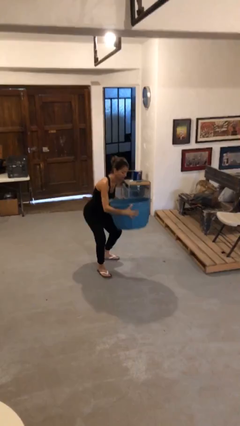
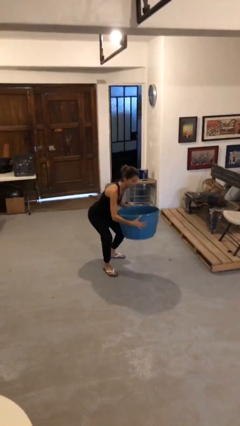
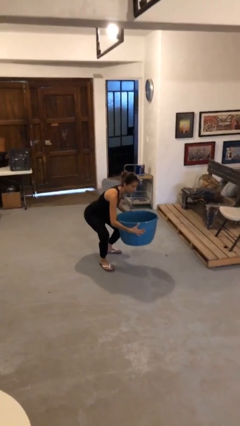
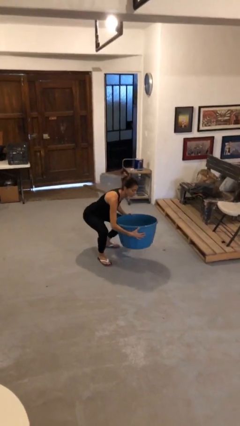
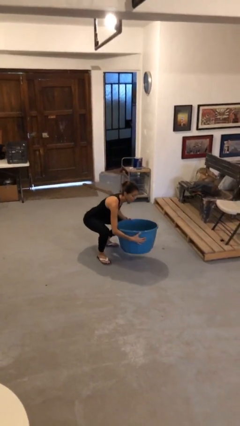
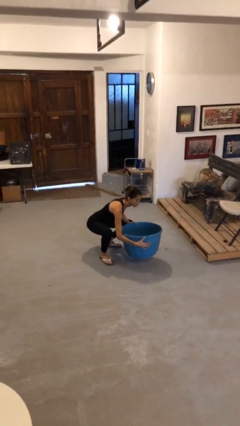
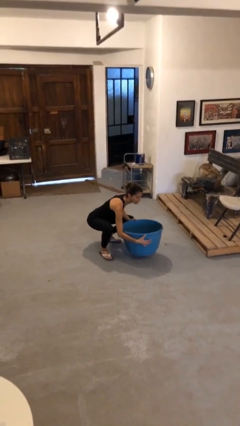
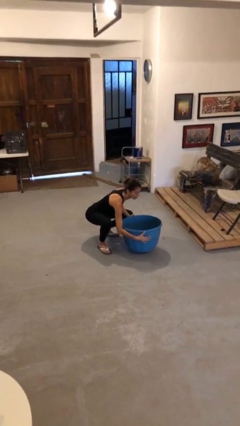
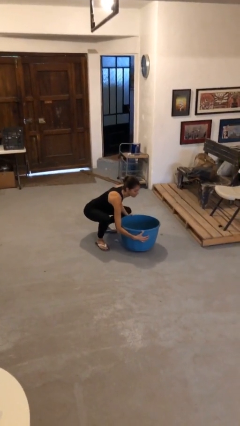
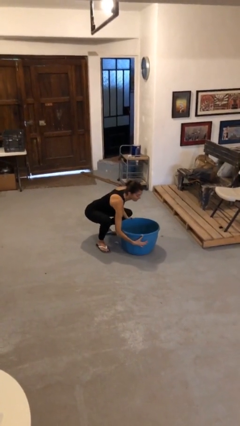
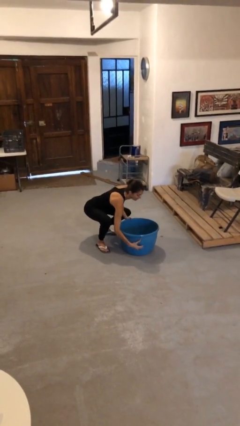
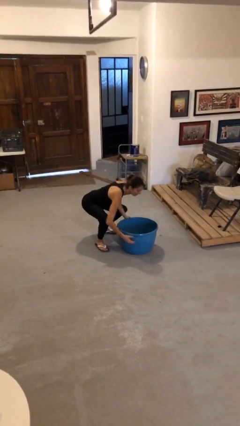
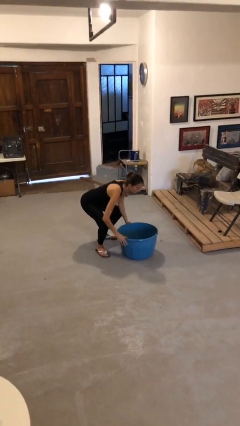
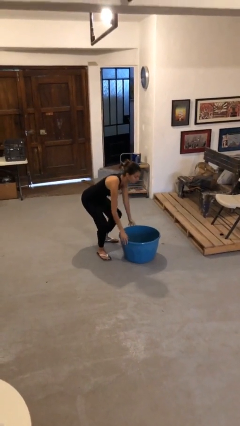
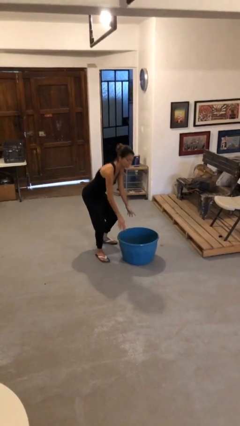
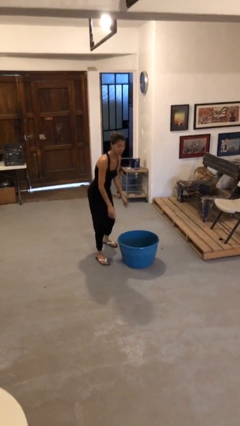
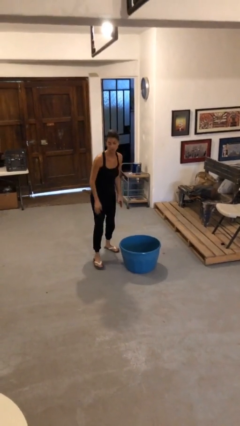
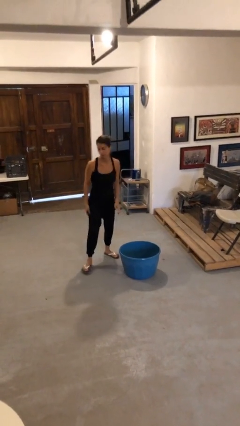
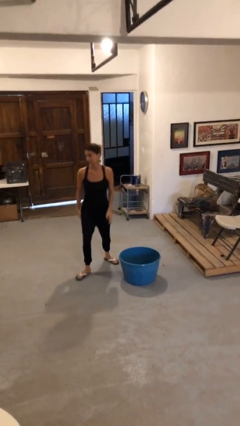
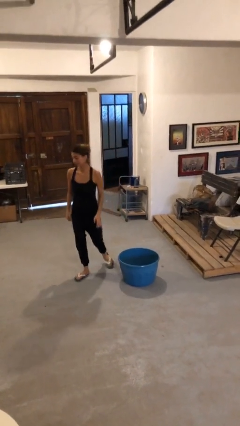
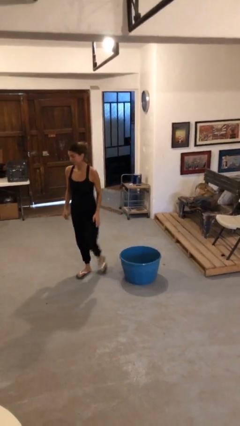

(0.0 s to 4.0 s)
person puts down object on floor

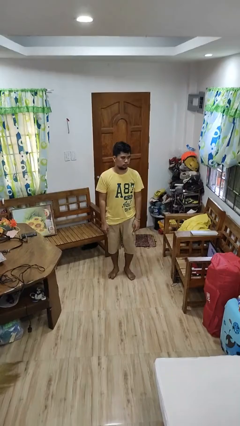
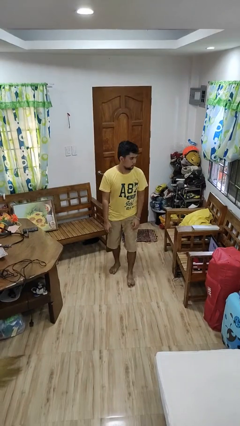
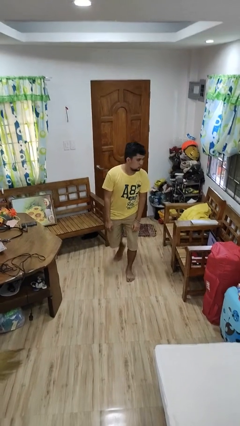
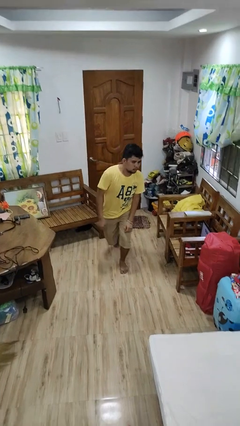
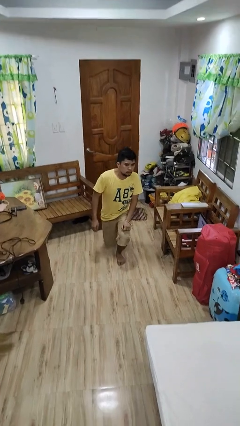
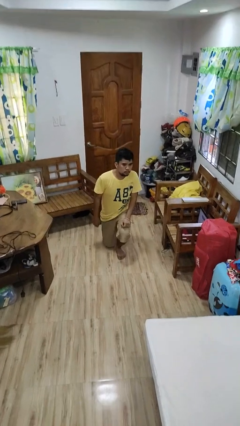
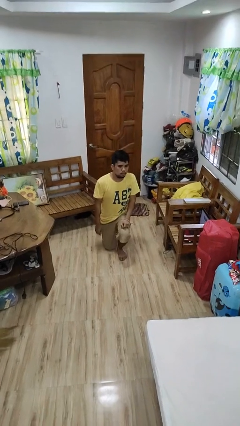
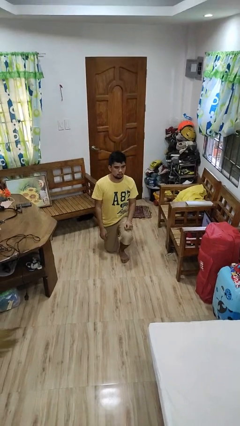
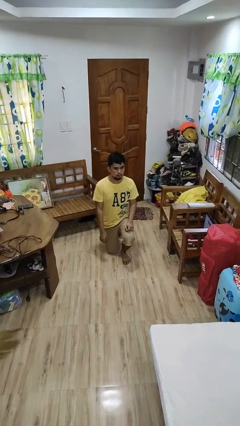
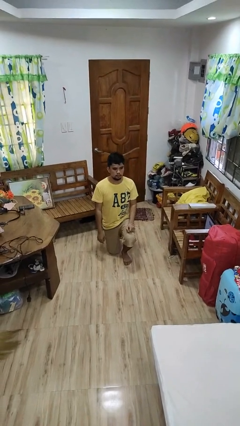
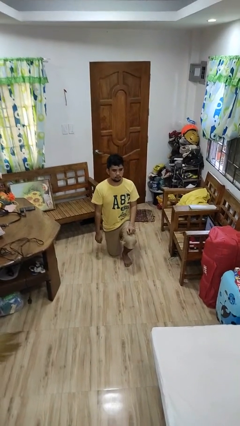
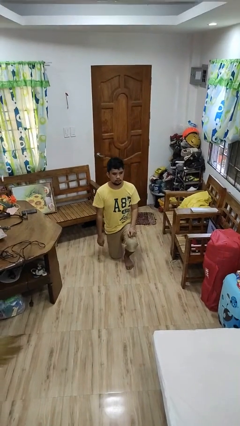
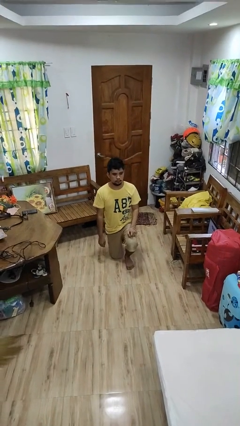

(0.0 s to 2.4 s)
person kneels

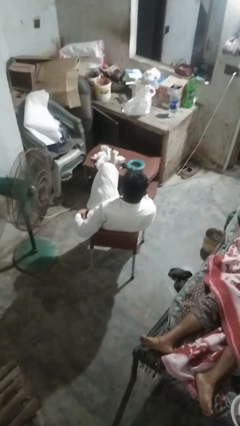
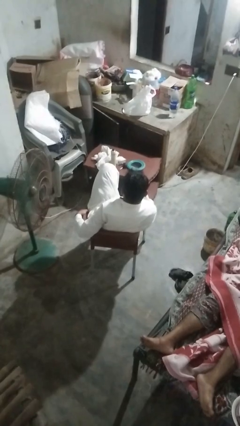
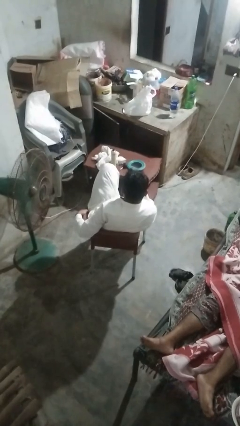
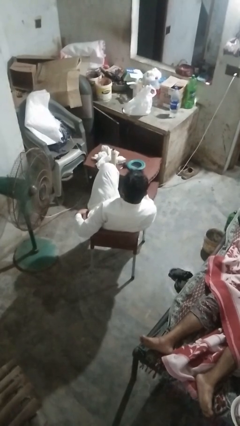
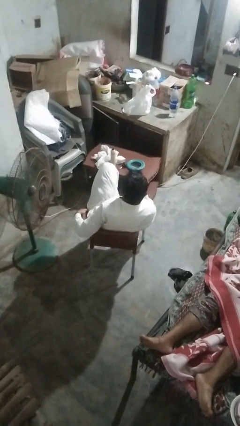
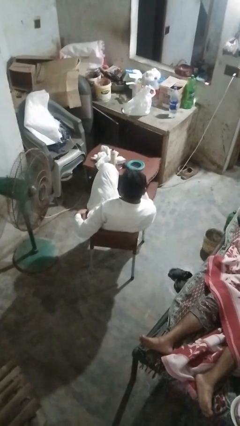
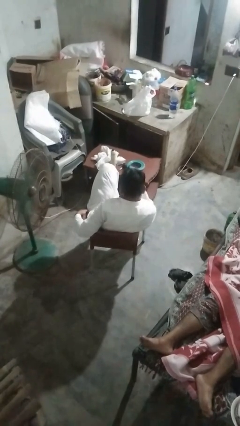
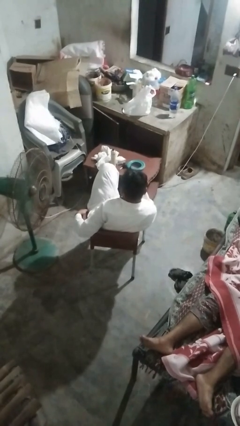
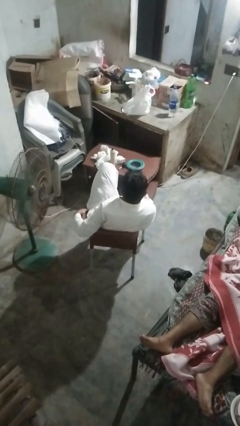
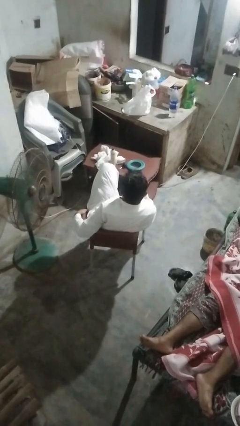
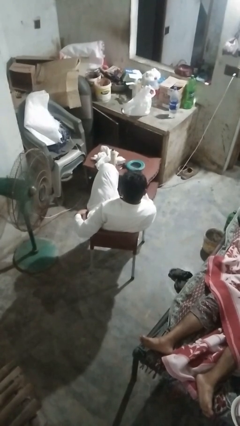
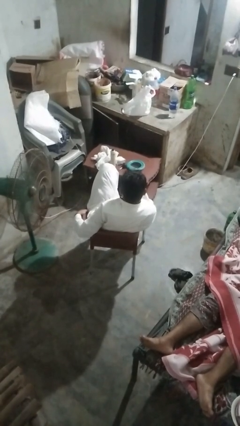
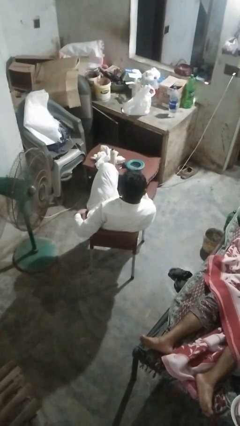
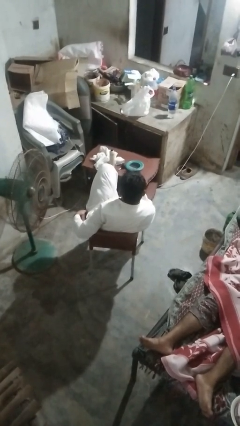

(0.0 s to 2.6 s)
person nods head

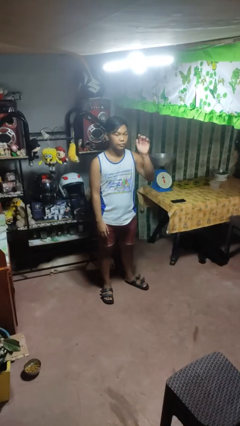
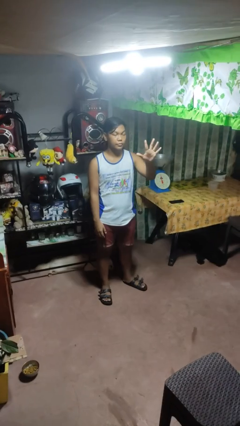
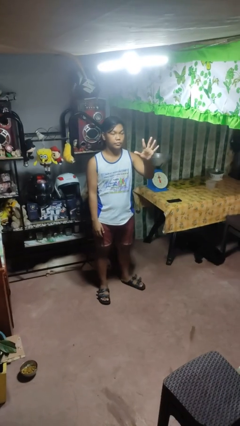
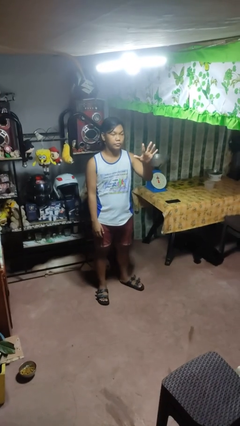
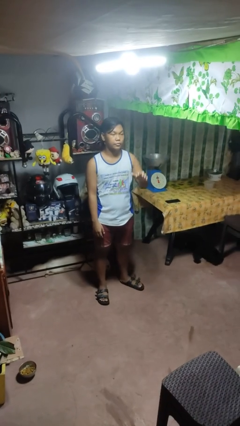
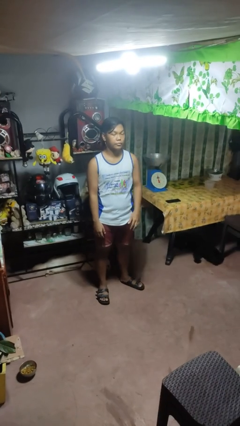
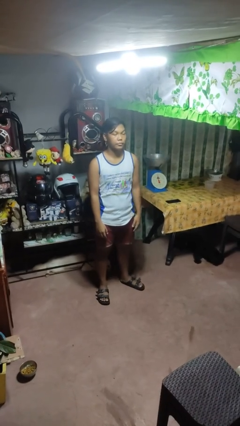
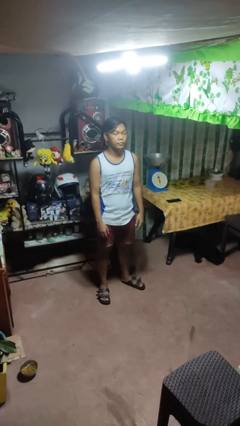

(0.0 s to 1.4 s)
person gestures number five

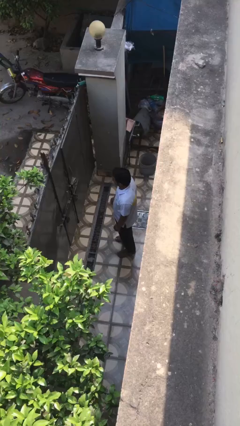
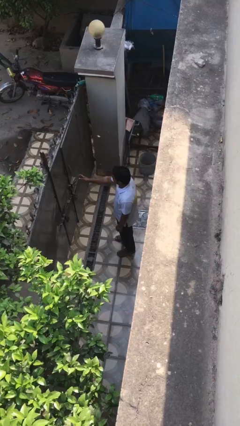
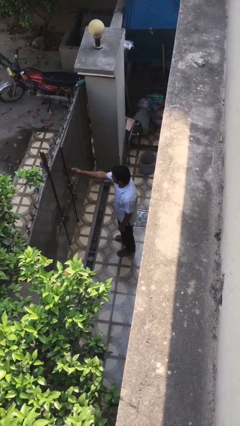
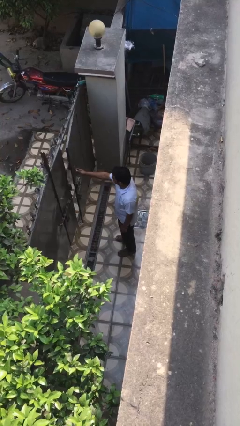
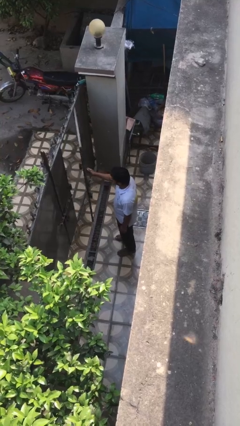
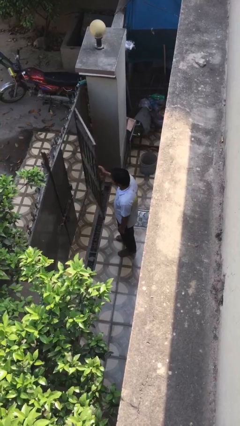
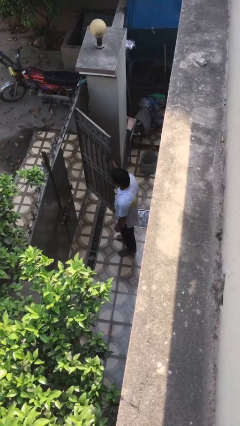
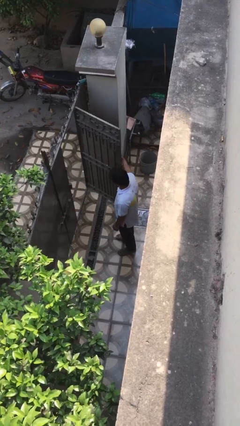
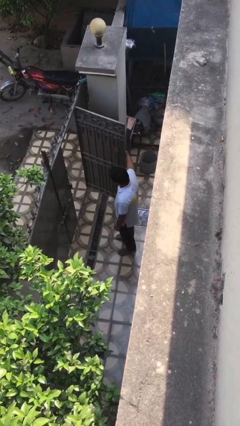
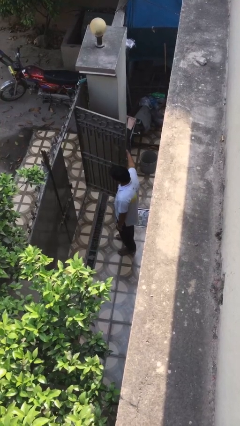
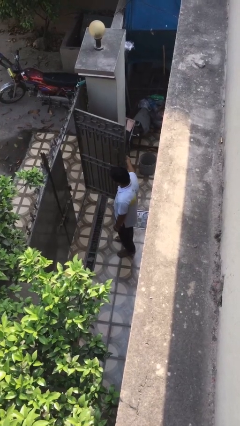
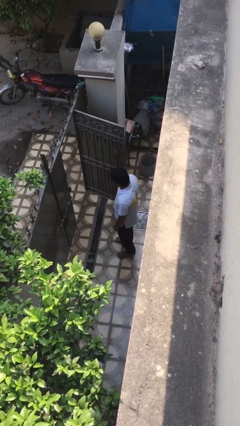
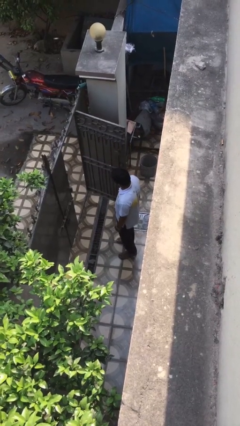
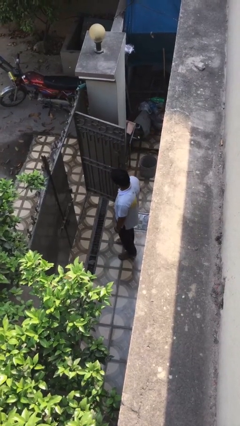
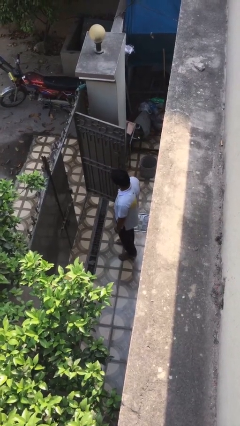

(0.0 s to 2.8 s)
person opens facility door

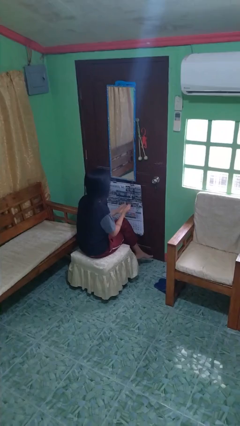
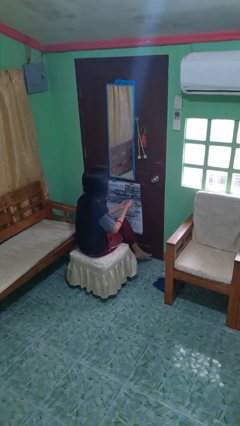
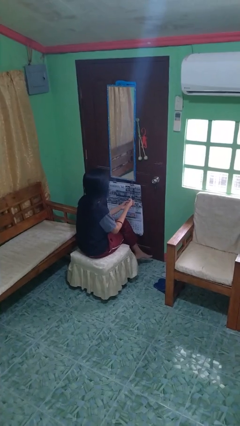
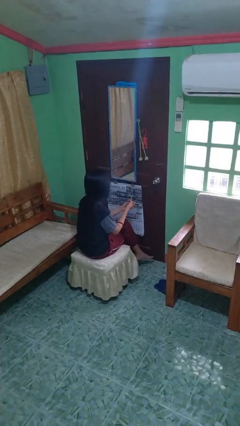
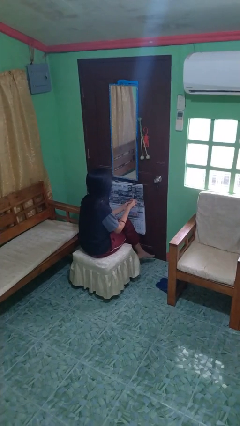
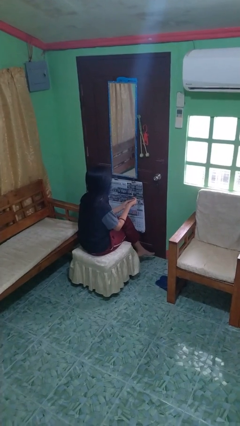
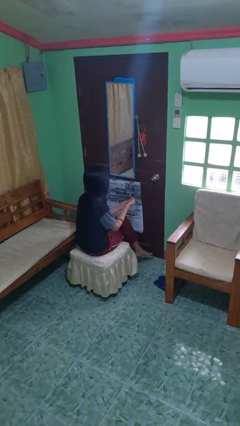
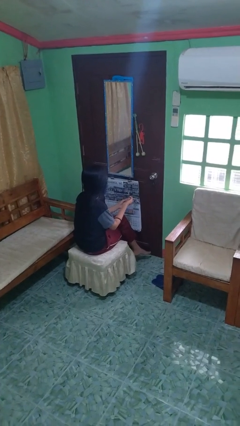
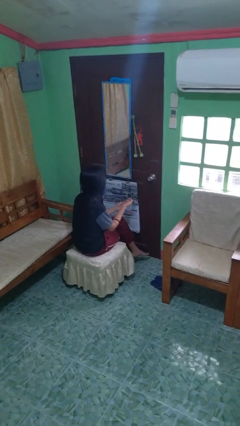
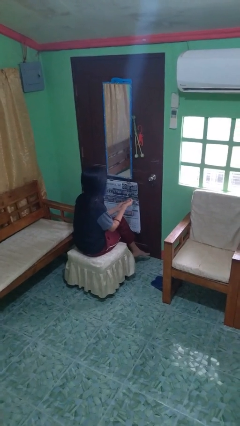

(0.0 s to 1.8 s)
person cracks knuckles

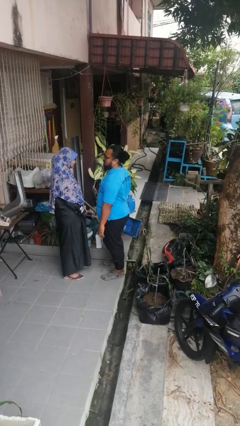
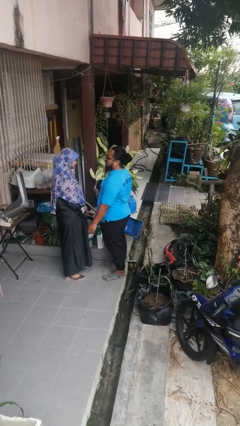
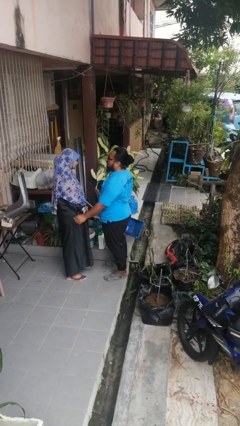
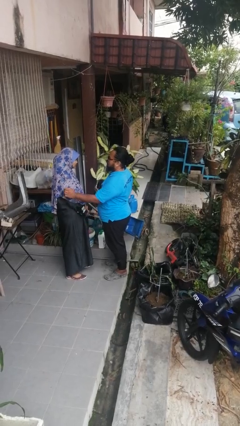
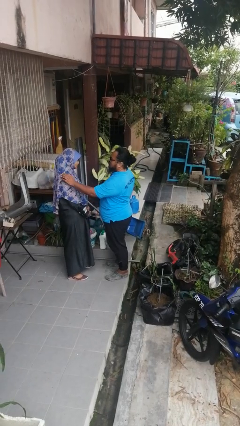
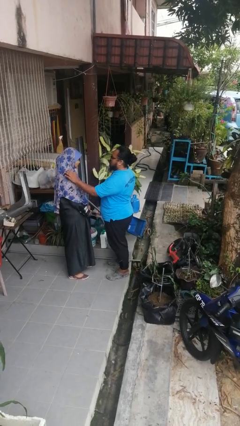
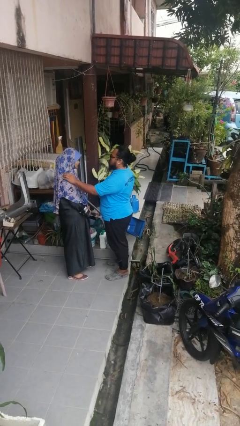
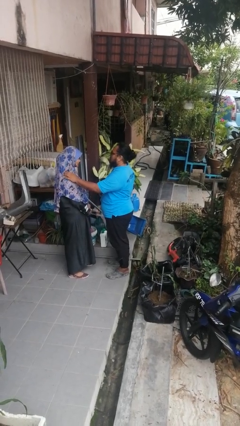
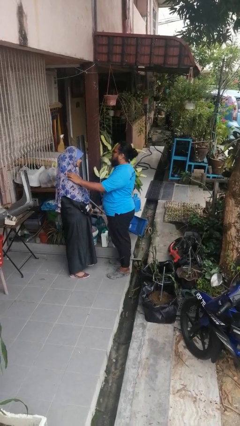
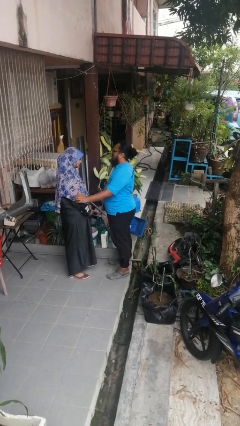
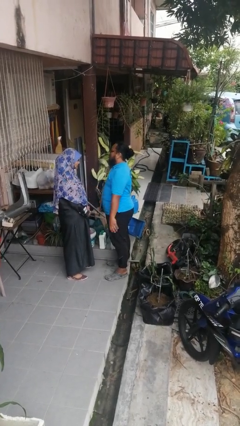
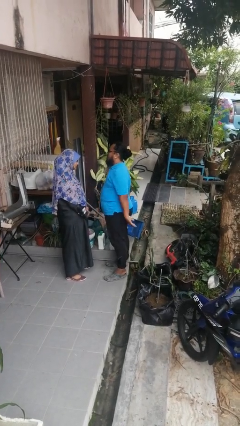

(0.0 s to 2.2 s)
person pounds shoulders of person
